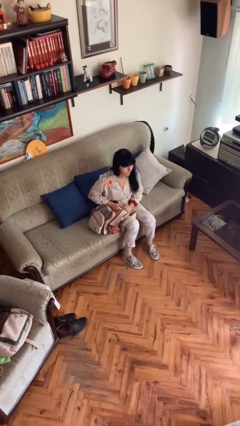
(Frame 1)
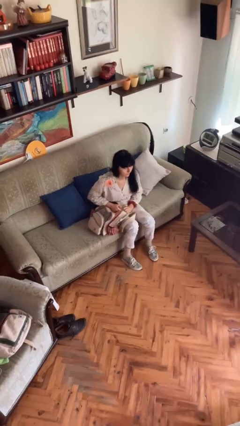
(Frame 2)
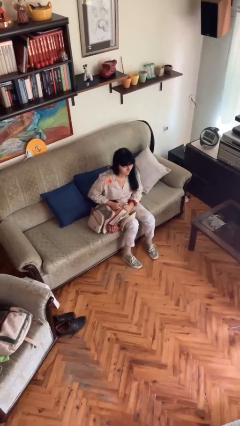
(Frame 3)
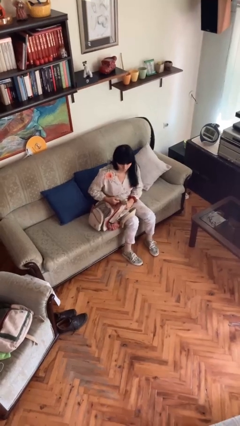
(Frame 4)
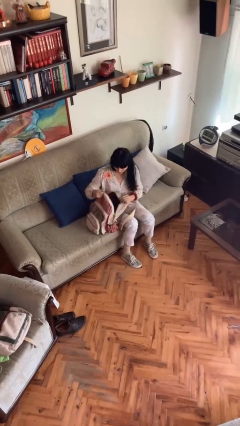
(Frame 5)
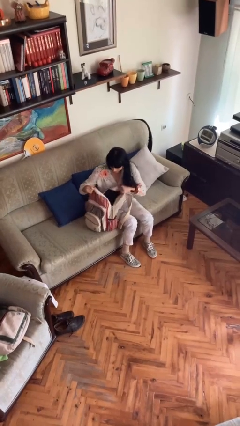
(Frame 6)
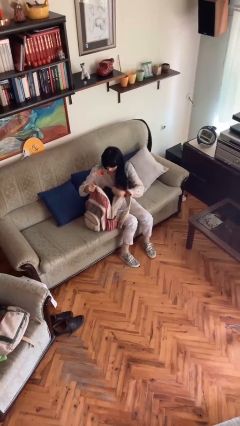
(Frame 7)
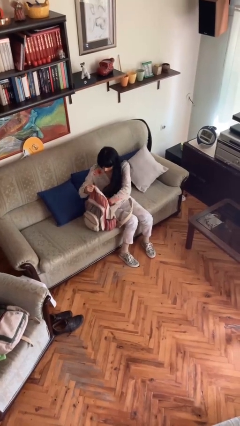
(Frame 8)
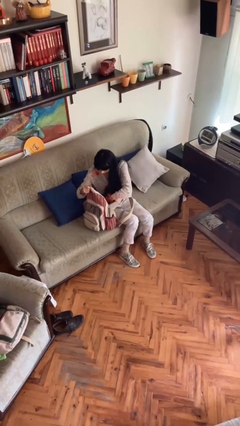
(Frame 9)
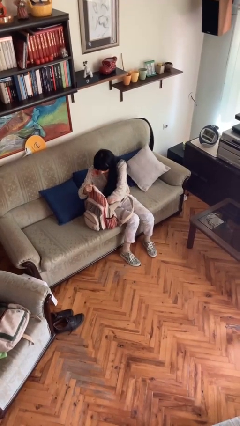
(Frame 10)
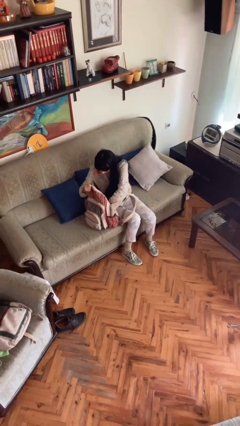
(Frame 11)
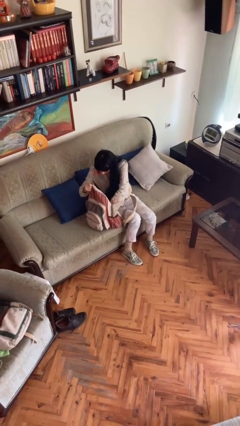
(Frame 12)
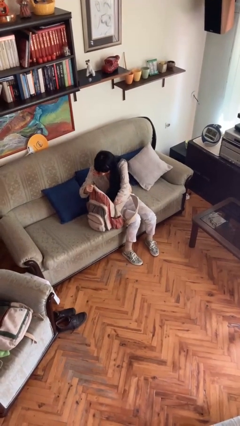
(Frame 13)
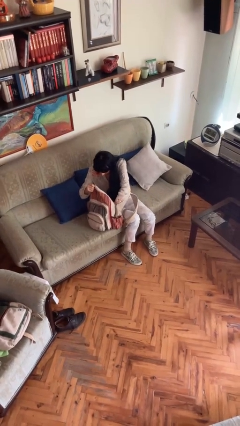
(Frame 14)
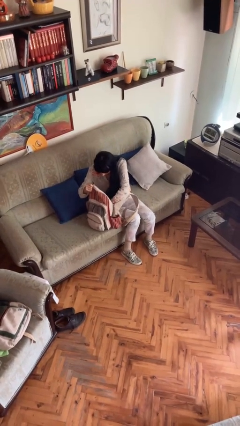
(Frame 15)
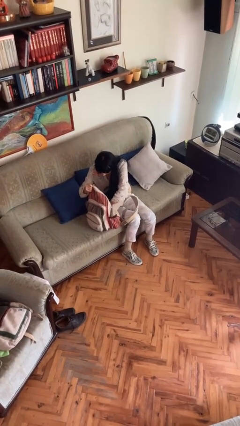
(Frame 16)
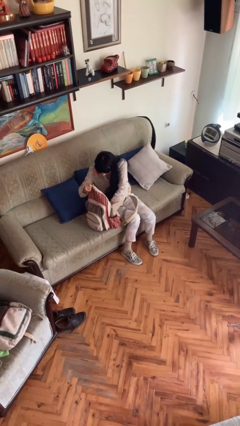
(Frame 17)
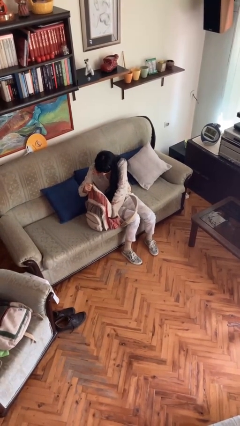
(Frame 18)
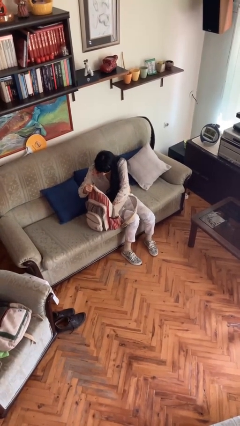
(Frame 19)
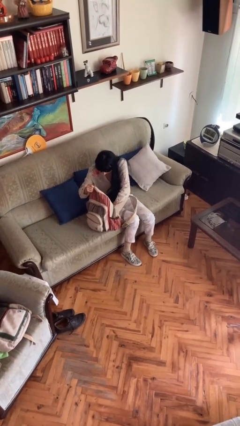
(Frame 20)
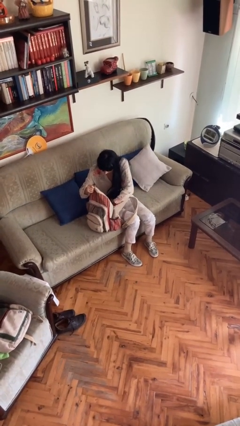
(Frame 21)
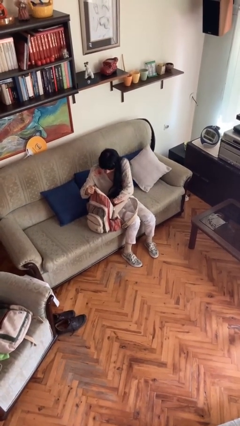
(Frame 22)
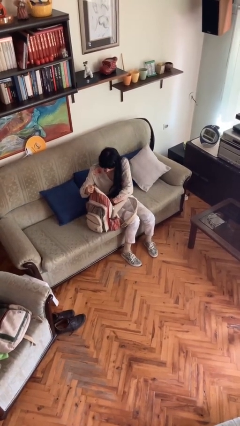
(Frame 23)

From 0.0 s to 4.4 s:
person searches in backpack

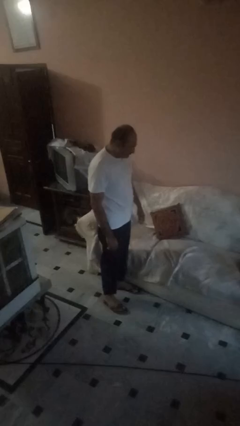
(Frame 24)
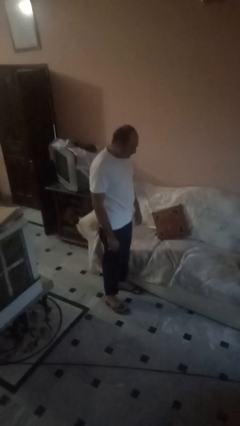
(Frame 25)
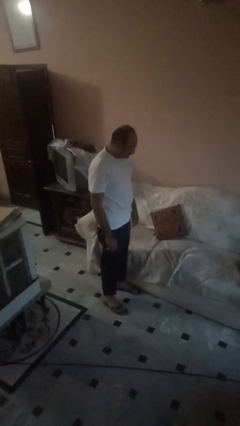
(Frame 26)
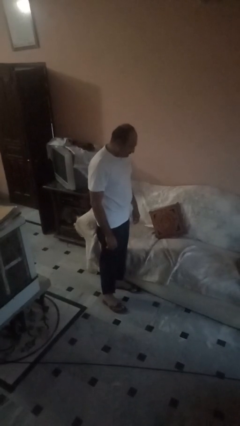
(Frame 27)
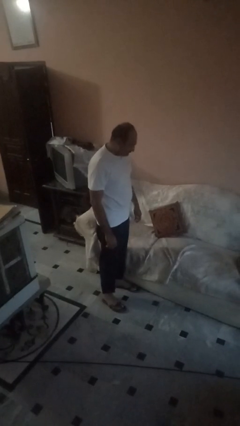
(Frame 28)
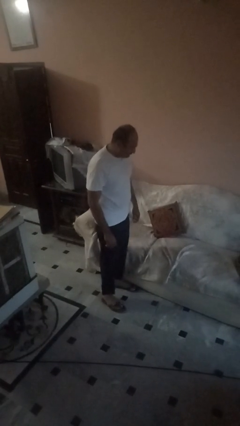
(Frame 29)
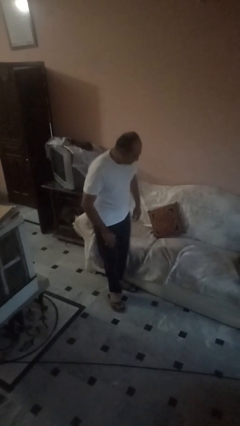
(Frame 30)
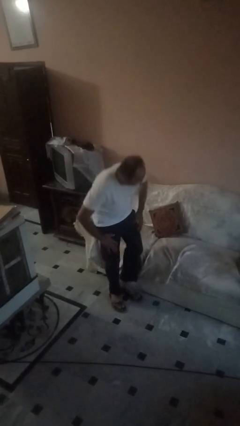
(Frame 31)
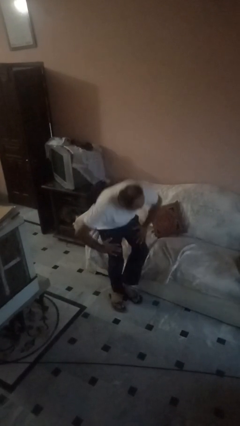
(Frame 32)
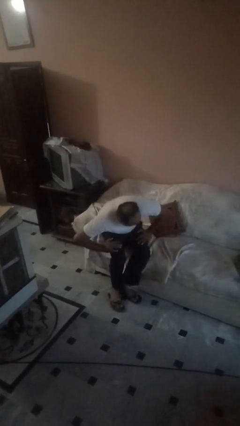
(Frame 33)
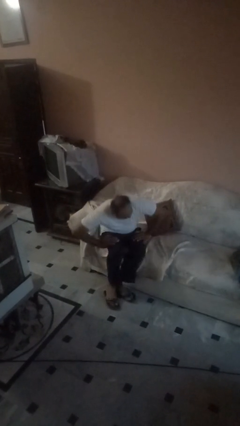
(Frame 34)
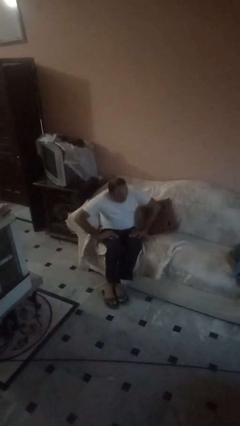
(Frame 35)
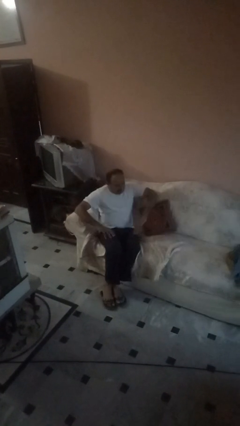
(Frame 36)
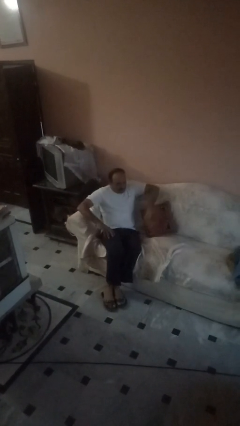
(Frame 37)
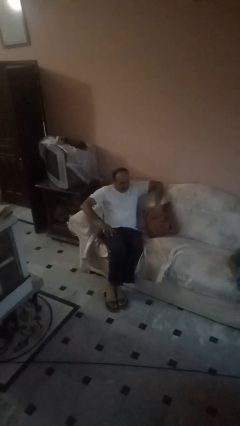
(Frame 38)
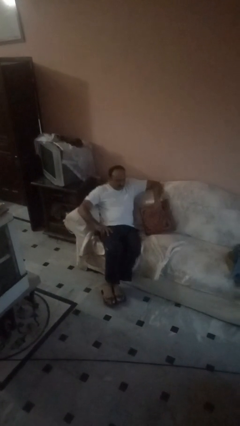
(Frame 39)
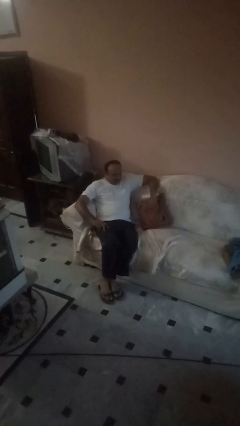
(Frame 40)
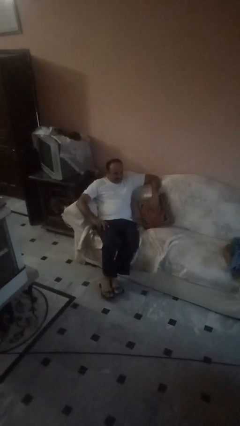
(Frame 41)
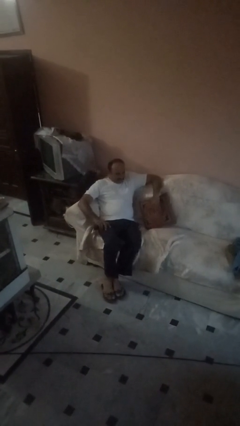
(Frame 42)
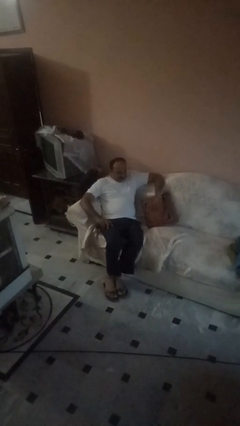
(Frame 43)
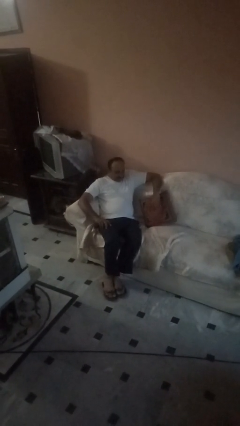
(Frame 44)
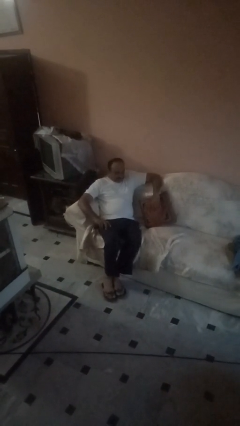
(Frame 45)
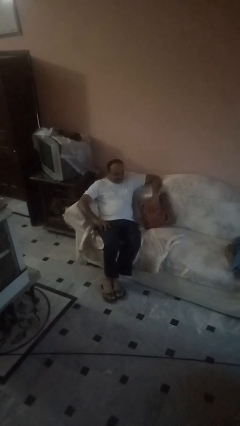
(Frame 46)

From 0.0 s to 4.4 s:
person lies down on couch

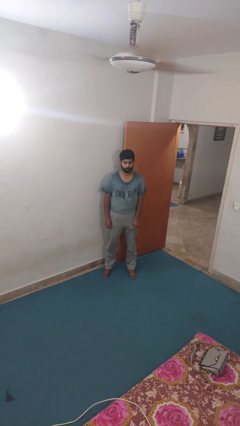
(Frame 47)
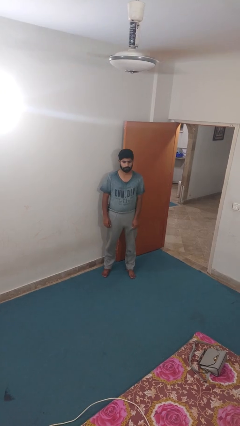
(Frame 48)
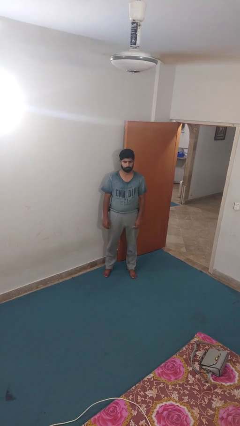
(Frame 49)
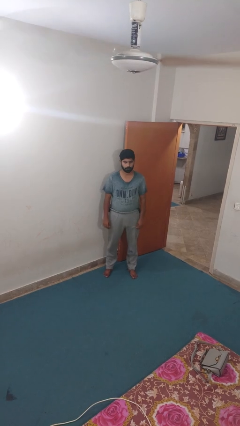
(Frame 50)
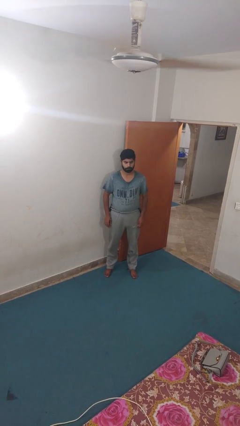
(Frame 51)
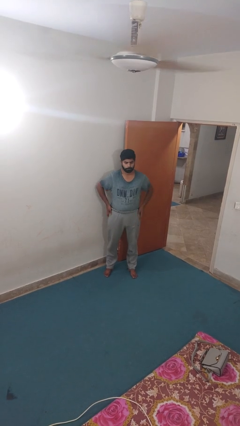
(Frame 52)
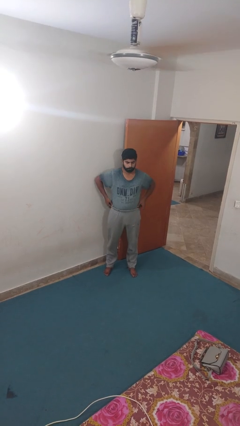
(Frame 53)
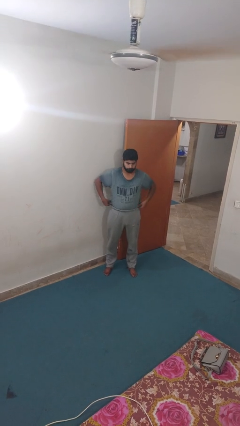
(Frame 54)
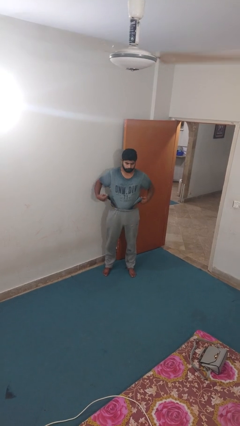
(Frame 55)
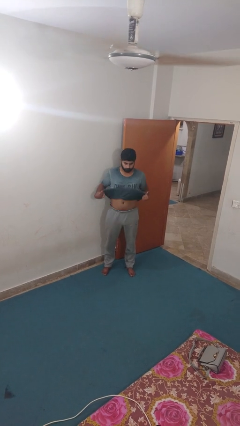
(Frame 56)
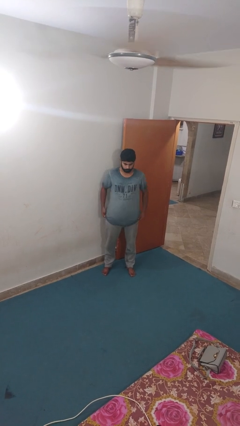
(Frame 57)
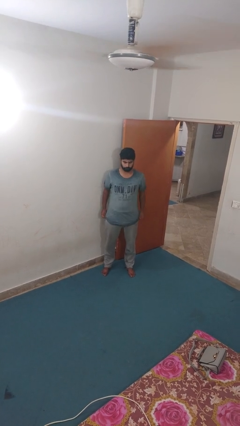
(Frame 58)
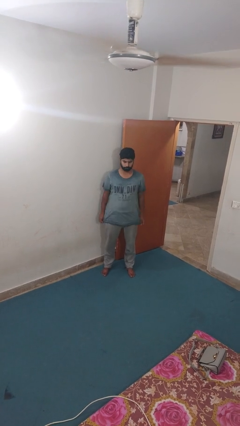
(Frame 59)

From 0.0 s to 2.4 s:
person untucks shirt

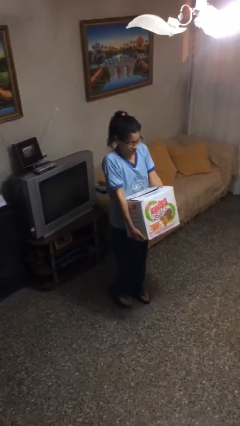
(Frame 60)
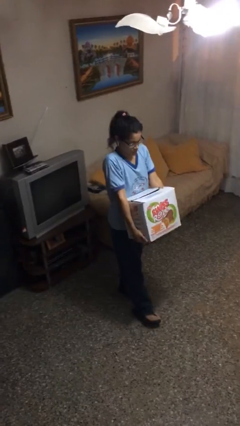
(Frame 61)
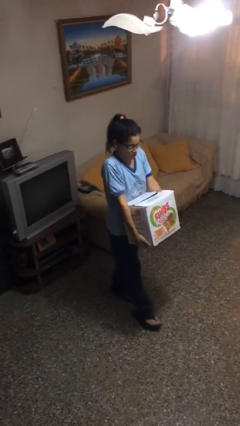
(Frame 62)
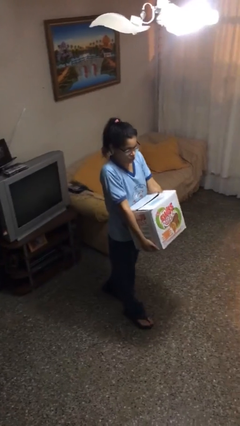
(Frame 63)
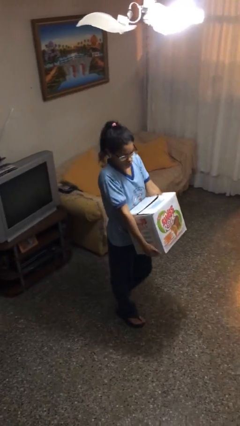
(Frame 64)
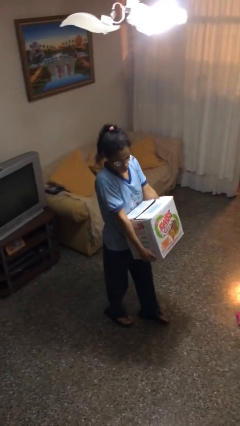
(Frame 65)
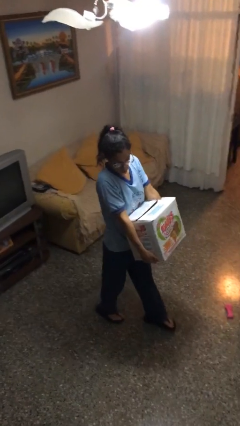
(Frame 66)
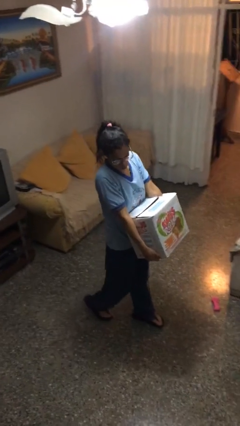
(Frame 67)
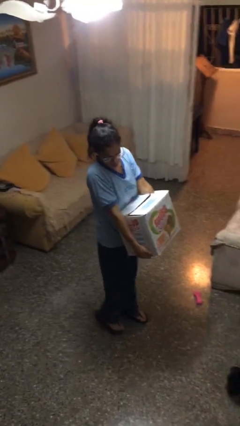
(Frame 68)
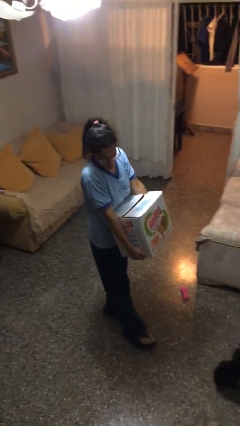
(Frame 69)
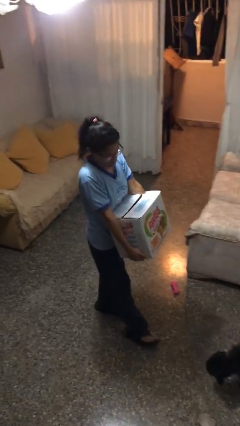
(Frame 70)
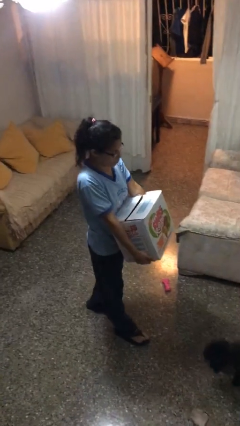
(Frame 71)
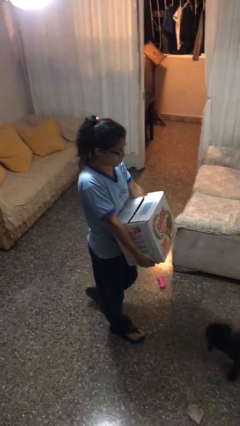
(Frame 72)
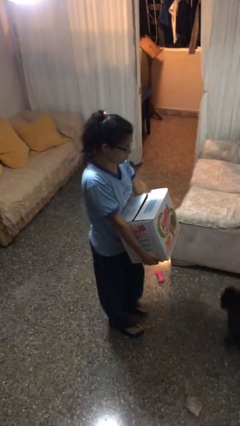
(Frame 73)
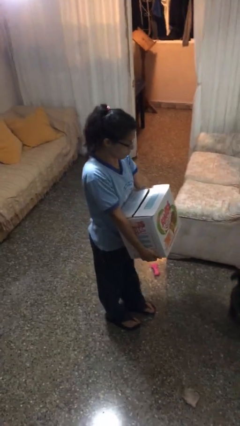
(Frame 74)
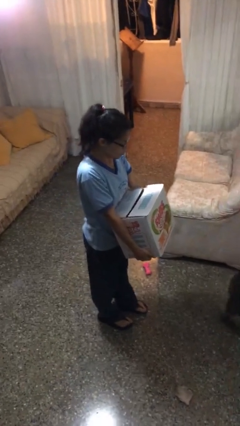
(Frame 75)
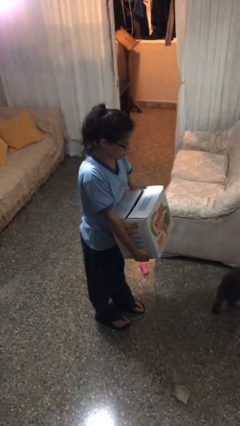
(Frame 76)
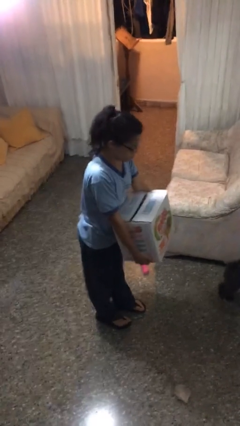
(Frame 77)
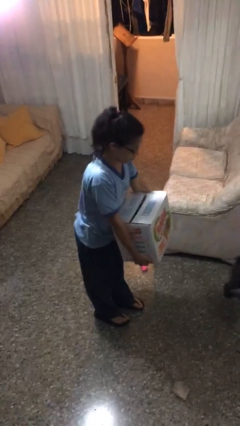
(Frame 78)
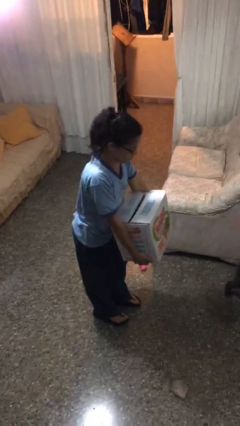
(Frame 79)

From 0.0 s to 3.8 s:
person carries heavy object

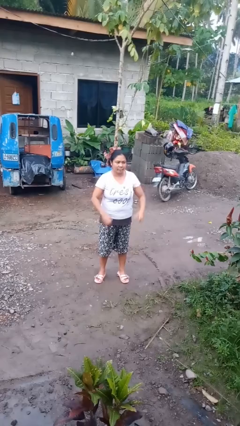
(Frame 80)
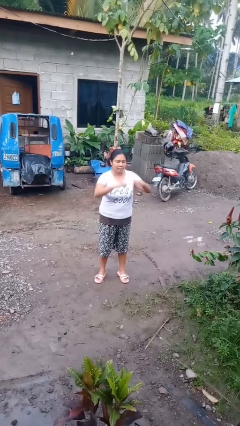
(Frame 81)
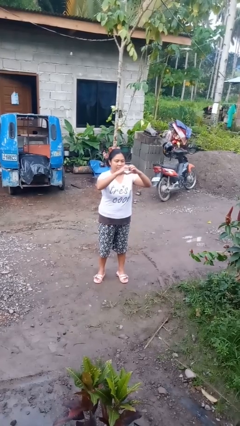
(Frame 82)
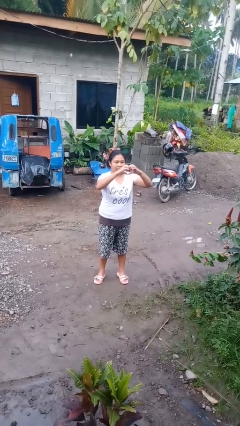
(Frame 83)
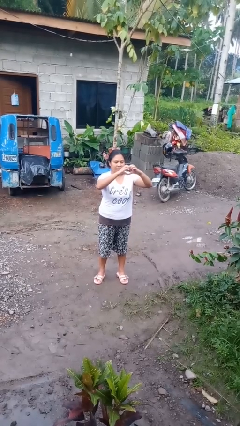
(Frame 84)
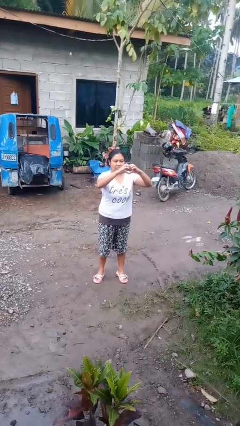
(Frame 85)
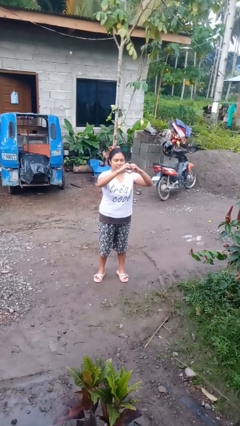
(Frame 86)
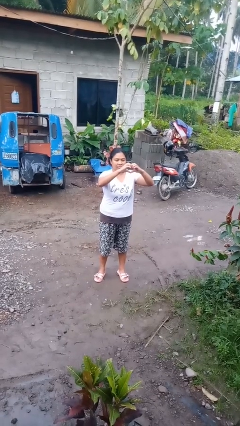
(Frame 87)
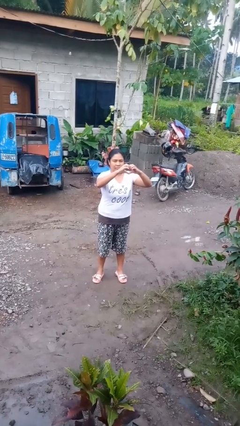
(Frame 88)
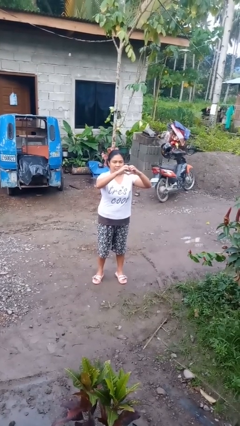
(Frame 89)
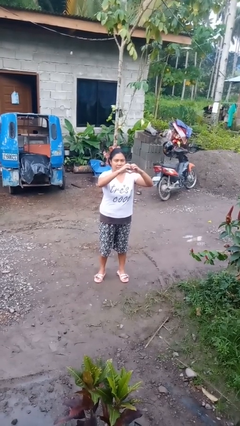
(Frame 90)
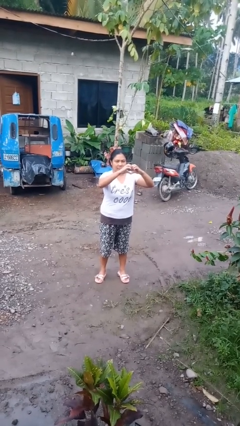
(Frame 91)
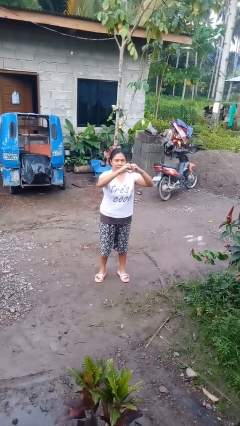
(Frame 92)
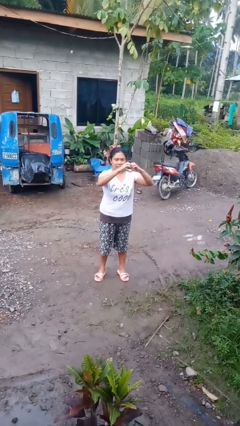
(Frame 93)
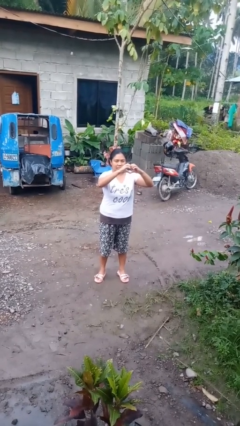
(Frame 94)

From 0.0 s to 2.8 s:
person gestures heart
